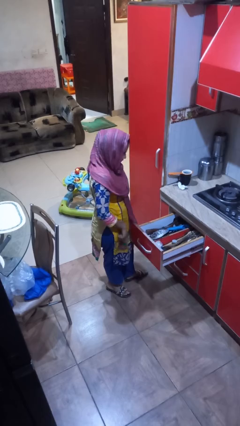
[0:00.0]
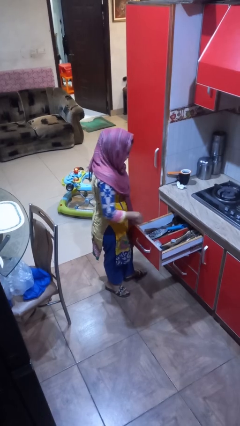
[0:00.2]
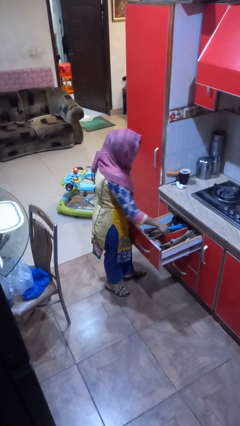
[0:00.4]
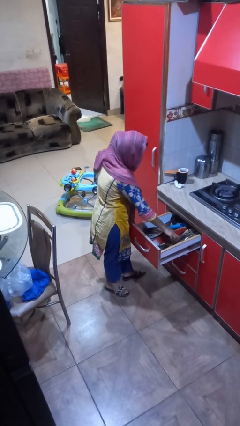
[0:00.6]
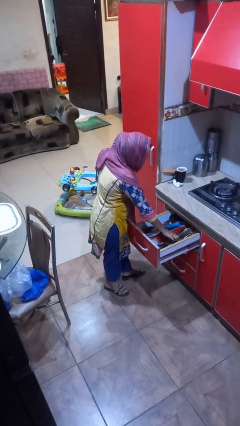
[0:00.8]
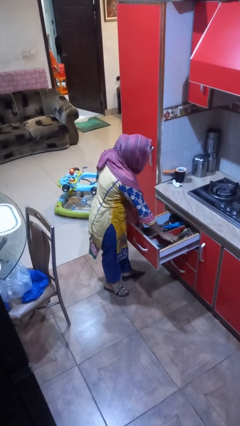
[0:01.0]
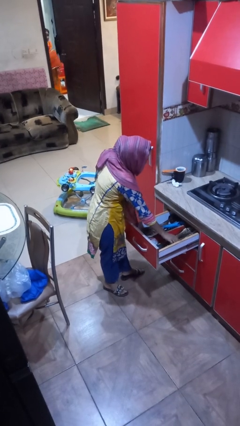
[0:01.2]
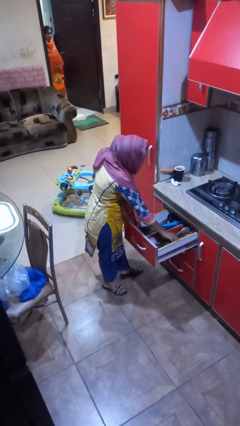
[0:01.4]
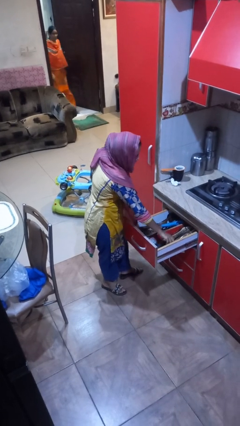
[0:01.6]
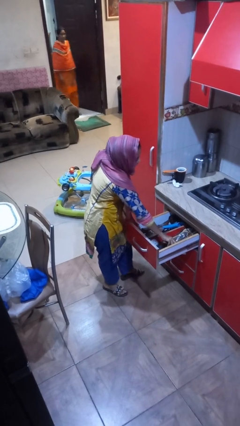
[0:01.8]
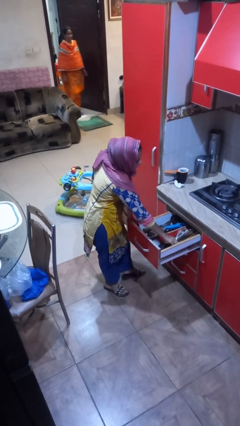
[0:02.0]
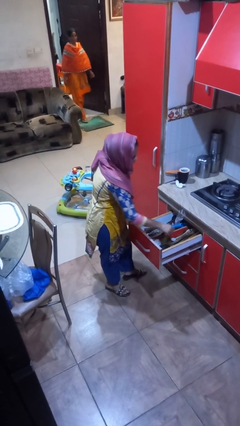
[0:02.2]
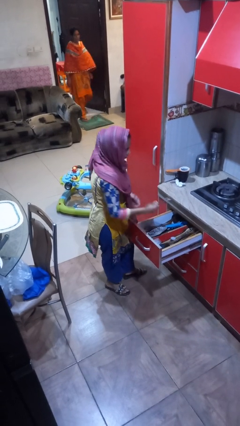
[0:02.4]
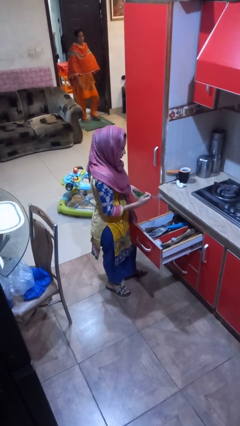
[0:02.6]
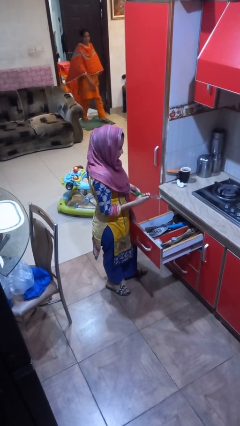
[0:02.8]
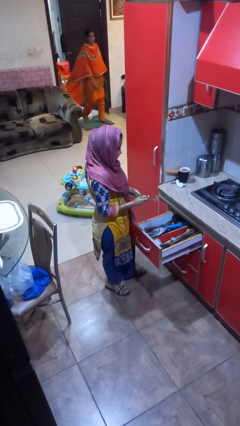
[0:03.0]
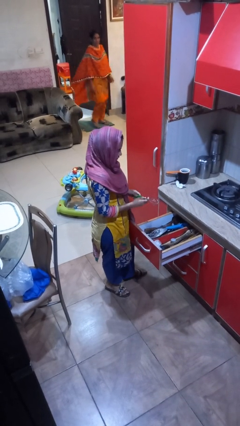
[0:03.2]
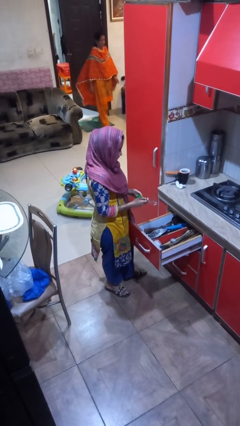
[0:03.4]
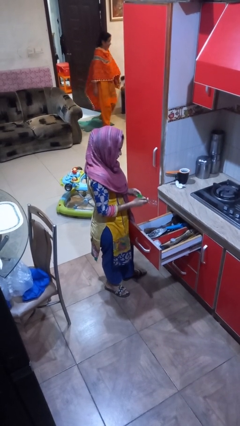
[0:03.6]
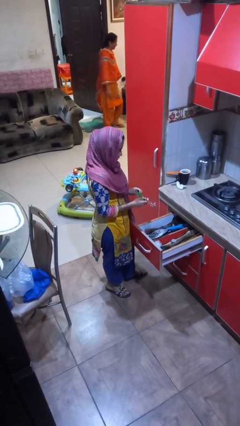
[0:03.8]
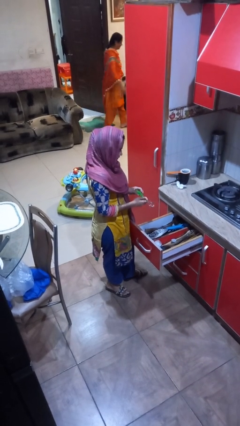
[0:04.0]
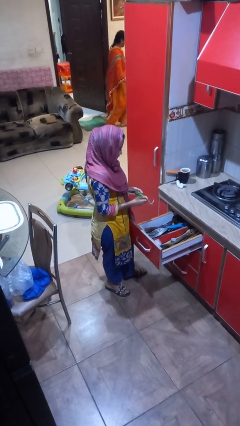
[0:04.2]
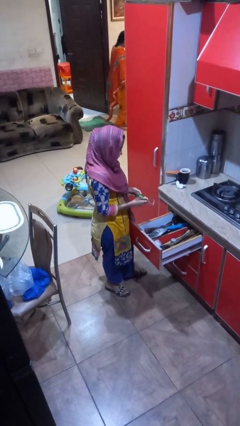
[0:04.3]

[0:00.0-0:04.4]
person takes object from kitchen drawer

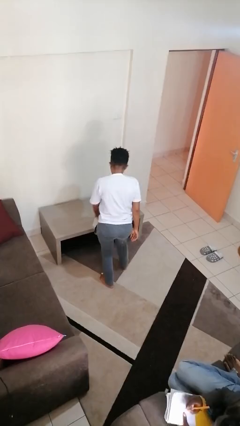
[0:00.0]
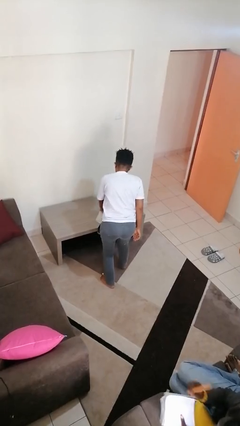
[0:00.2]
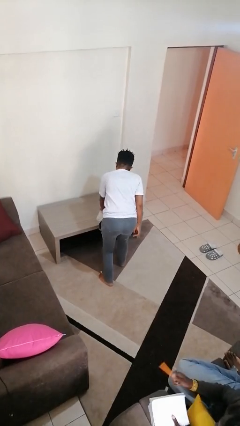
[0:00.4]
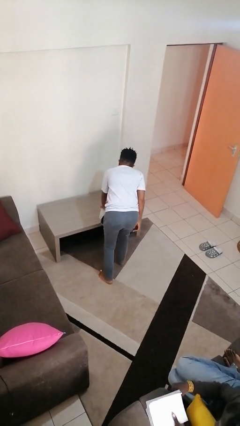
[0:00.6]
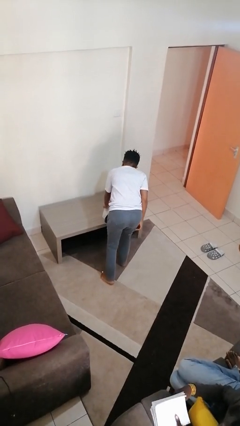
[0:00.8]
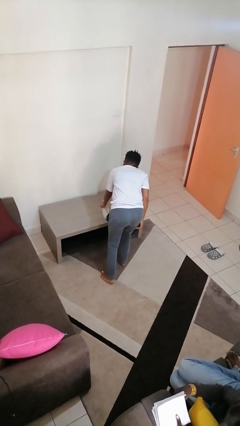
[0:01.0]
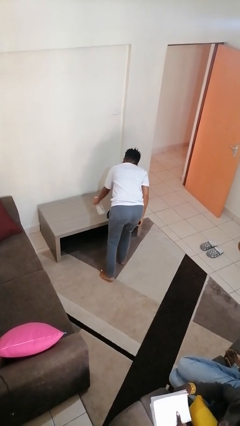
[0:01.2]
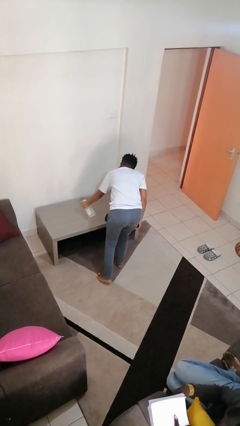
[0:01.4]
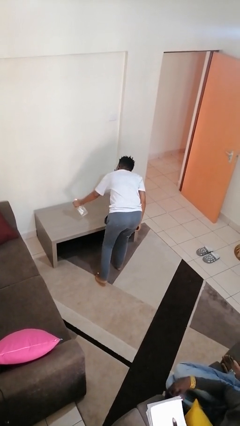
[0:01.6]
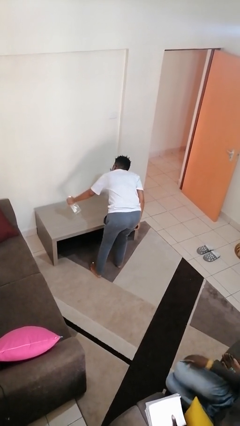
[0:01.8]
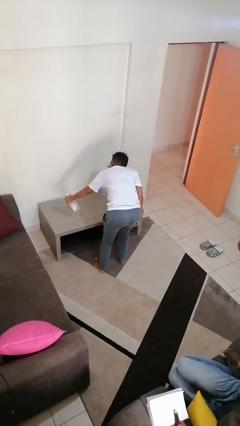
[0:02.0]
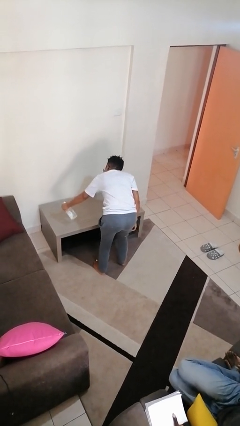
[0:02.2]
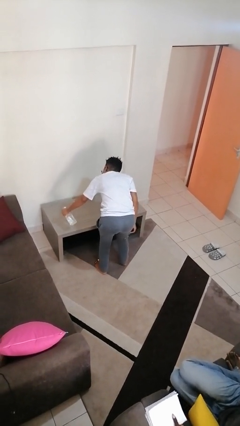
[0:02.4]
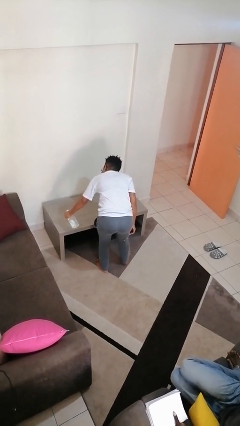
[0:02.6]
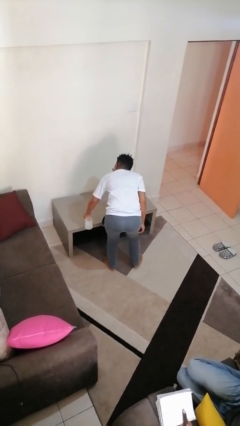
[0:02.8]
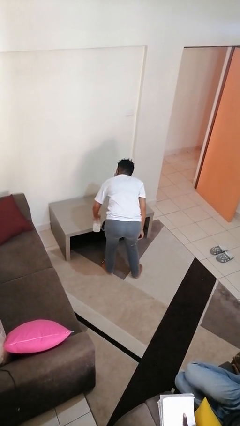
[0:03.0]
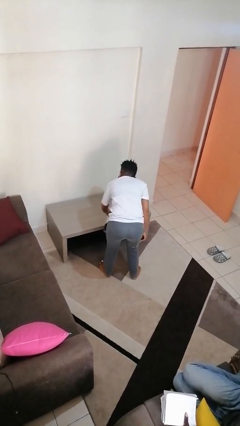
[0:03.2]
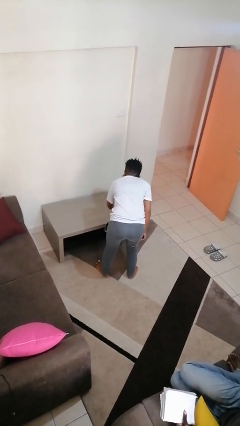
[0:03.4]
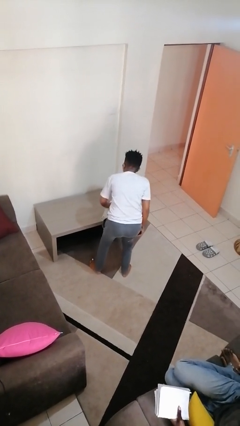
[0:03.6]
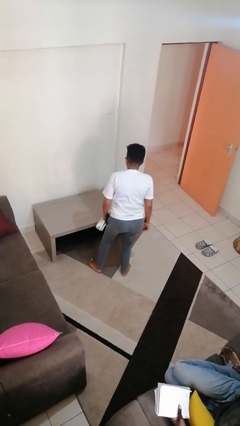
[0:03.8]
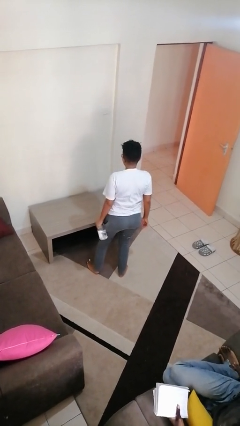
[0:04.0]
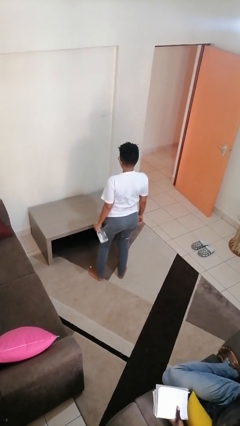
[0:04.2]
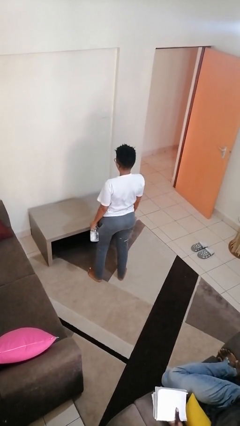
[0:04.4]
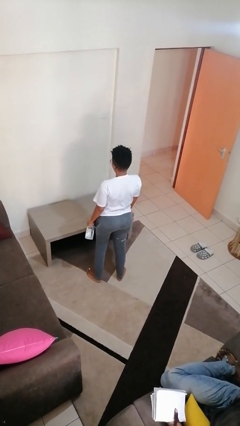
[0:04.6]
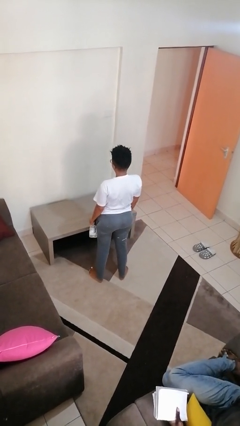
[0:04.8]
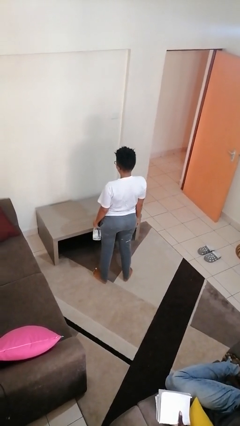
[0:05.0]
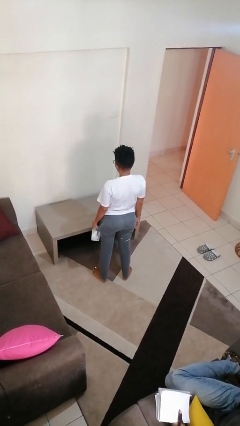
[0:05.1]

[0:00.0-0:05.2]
person sprays from bottle

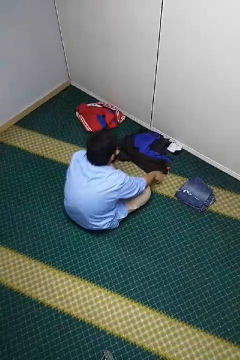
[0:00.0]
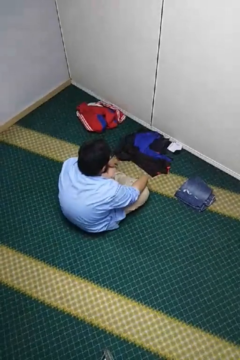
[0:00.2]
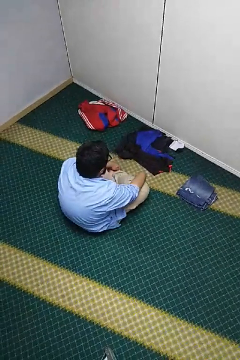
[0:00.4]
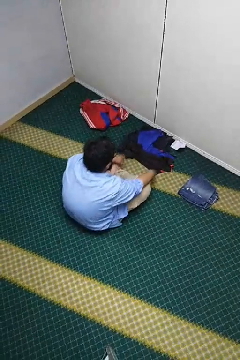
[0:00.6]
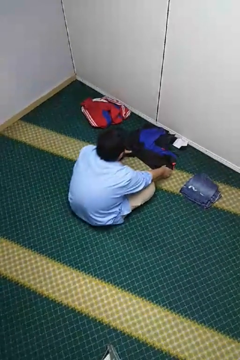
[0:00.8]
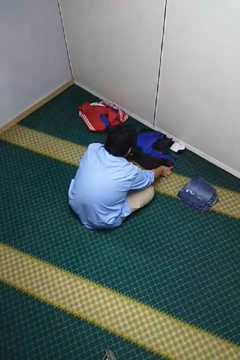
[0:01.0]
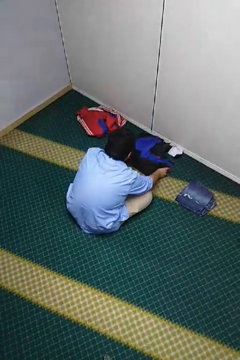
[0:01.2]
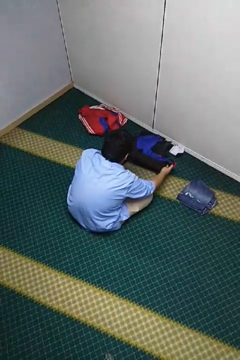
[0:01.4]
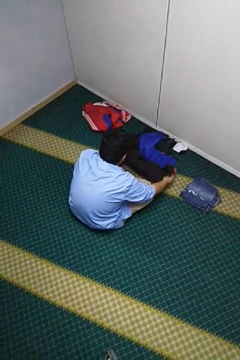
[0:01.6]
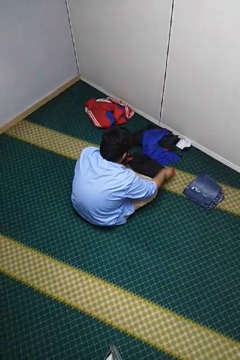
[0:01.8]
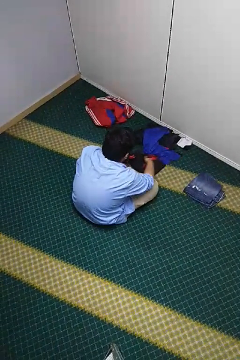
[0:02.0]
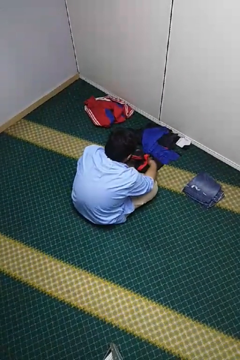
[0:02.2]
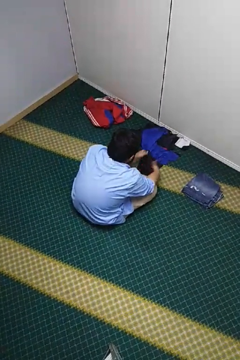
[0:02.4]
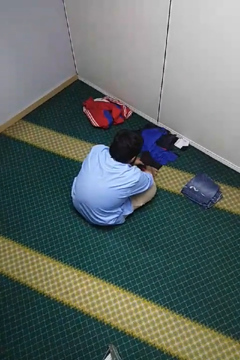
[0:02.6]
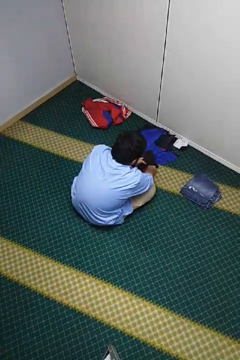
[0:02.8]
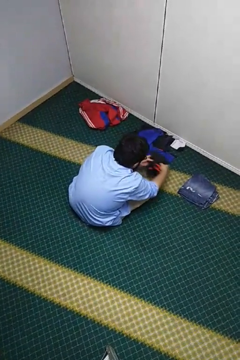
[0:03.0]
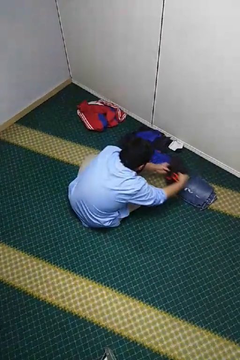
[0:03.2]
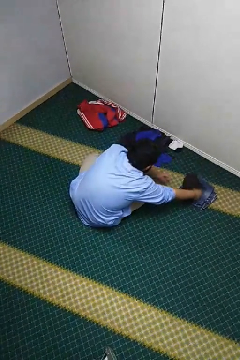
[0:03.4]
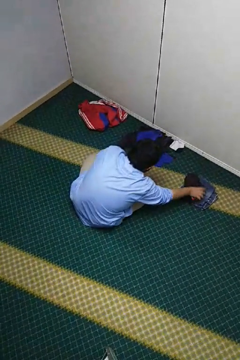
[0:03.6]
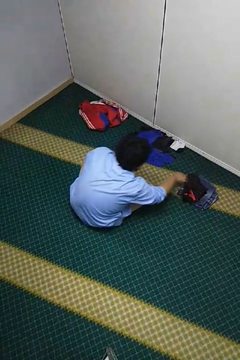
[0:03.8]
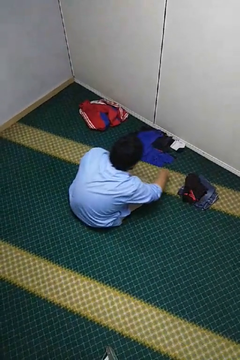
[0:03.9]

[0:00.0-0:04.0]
person folds shirt

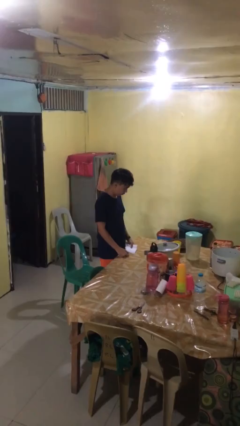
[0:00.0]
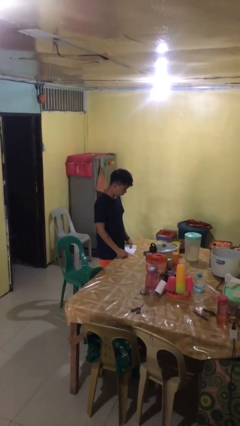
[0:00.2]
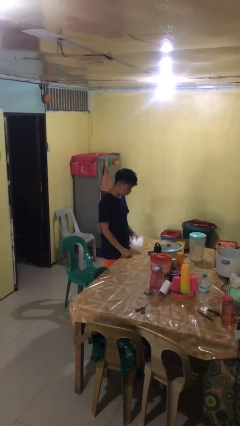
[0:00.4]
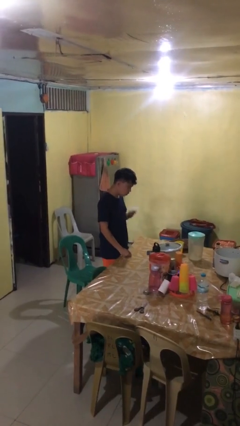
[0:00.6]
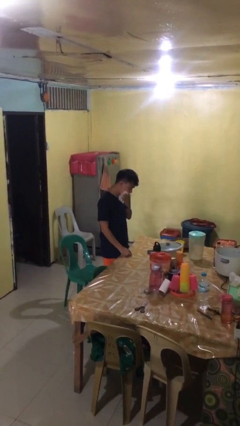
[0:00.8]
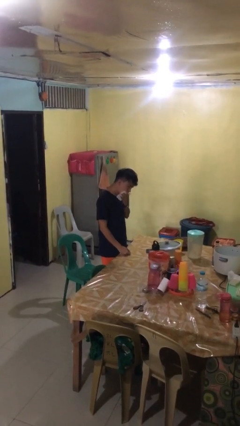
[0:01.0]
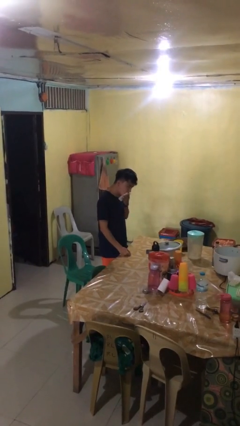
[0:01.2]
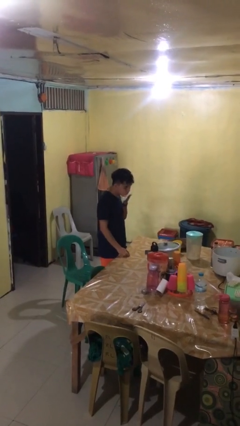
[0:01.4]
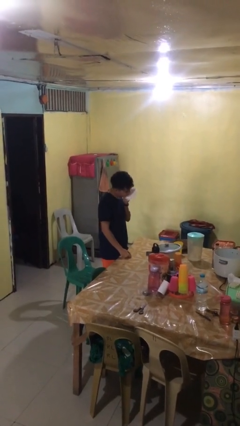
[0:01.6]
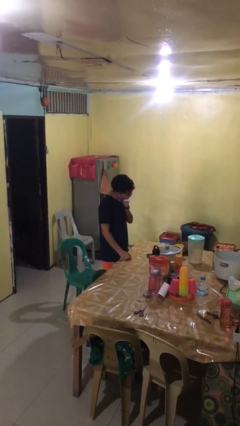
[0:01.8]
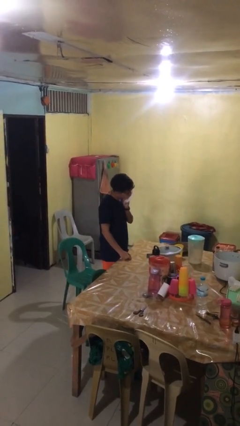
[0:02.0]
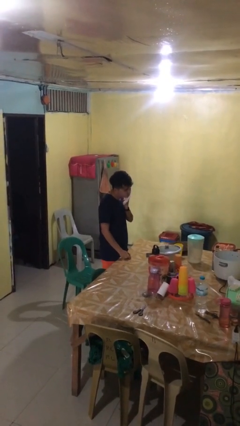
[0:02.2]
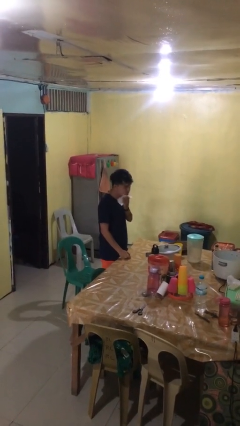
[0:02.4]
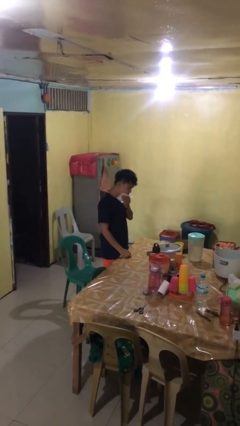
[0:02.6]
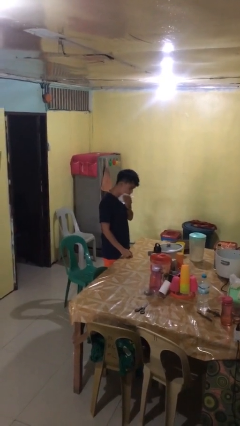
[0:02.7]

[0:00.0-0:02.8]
person wipes mouth with napkin

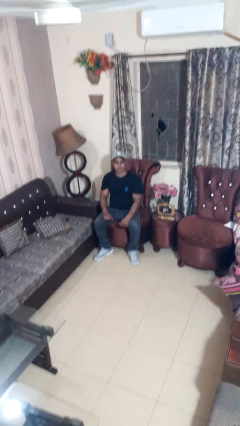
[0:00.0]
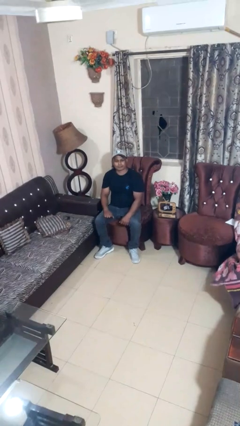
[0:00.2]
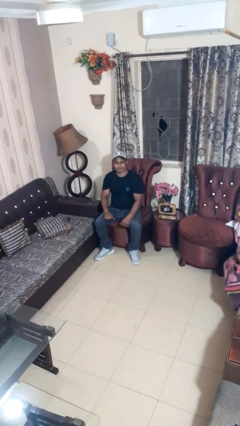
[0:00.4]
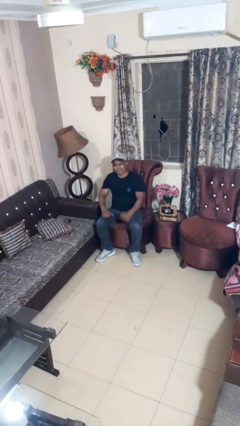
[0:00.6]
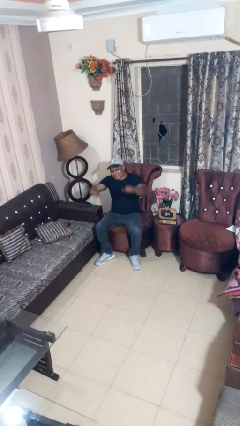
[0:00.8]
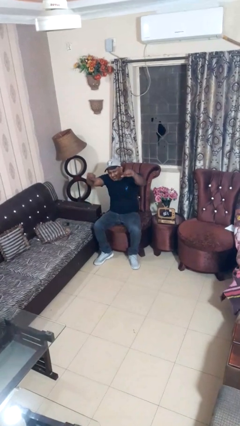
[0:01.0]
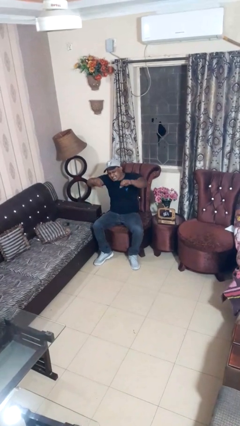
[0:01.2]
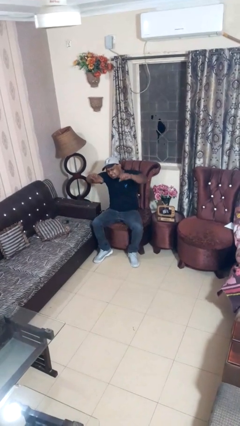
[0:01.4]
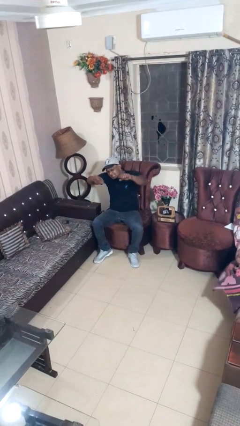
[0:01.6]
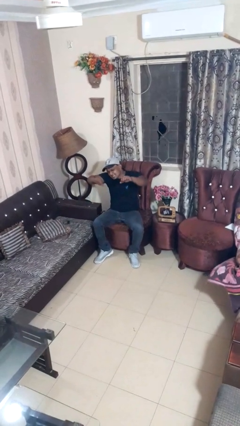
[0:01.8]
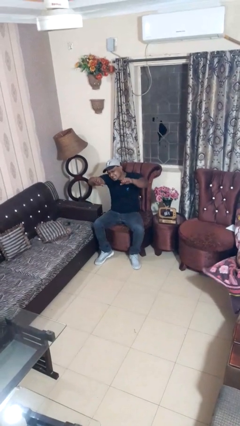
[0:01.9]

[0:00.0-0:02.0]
person gestures thumbs down
